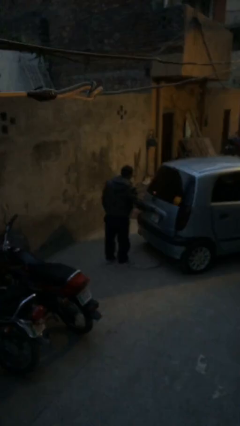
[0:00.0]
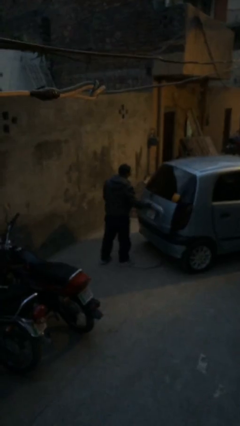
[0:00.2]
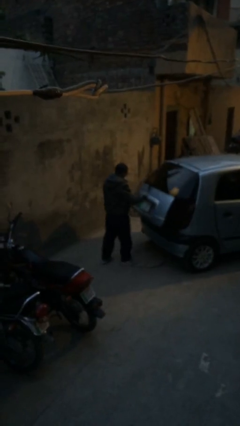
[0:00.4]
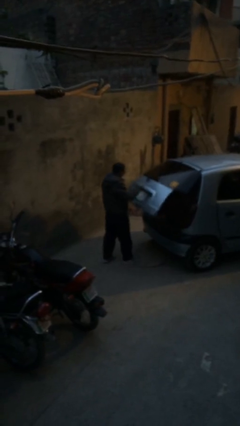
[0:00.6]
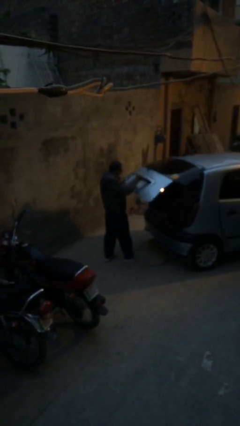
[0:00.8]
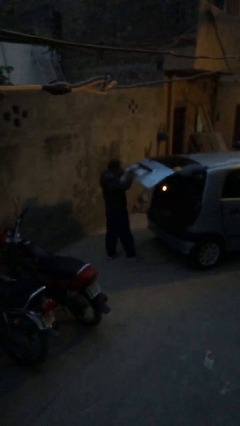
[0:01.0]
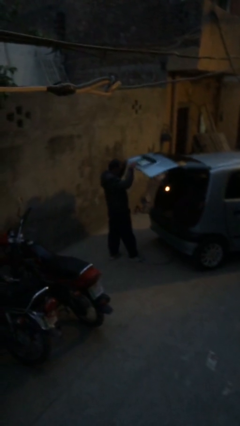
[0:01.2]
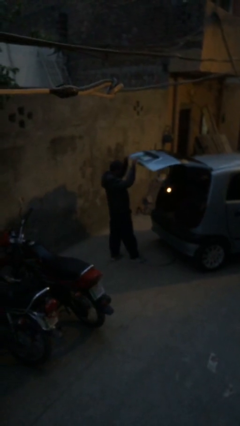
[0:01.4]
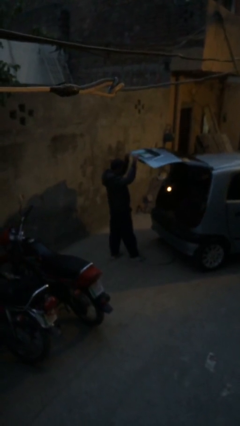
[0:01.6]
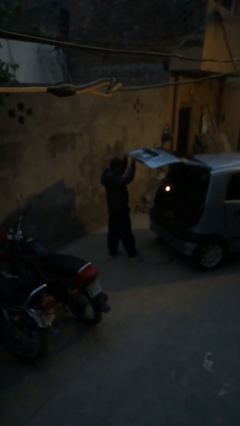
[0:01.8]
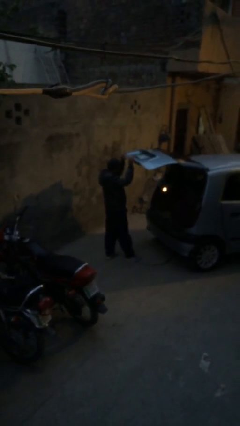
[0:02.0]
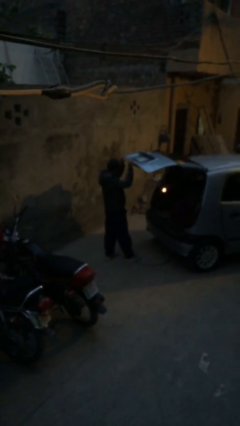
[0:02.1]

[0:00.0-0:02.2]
person opens car trunk

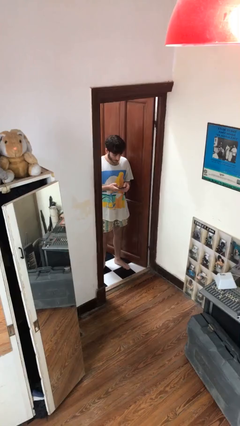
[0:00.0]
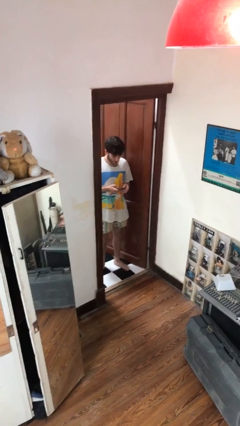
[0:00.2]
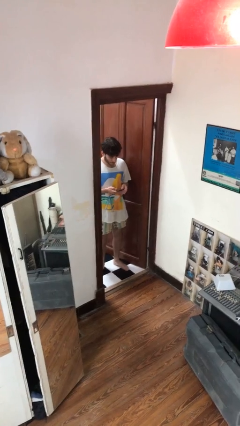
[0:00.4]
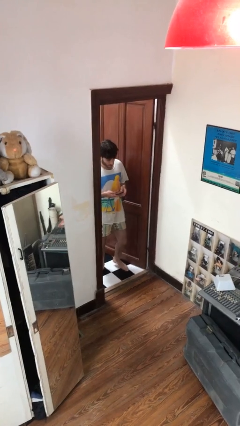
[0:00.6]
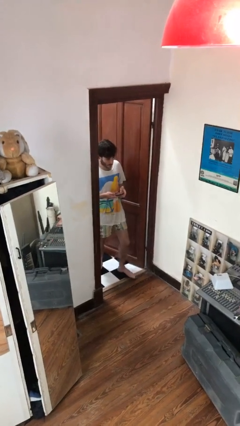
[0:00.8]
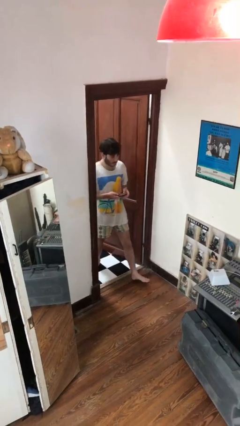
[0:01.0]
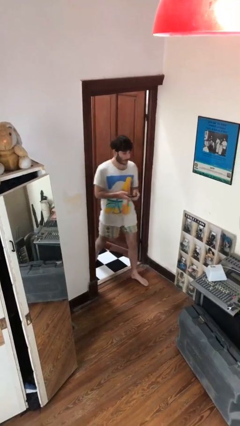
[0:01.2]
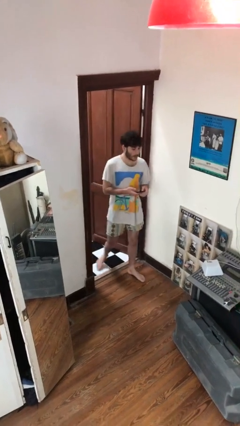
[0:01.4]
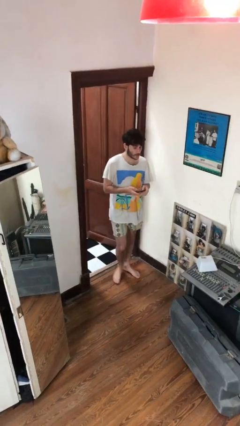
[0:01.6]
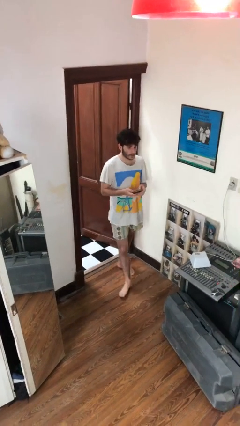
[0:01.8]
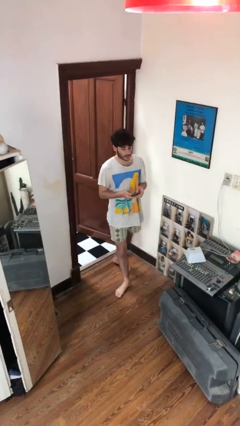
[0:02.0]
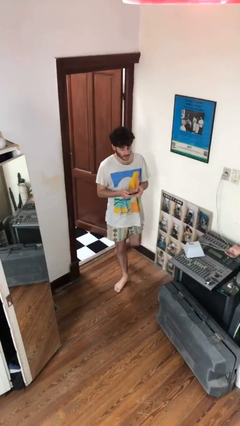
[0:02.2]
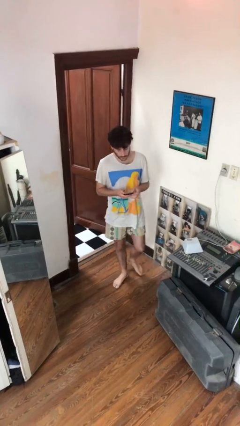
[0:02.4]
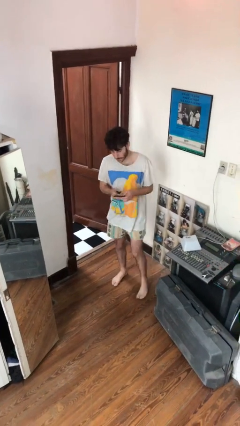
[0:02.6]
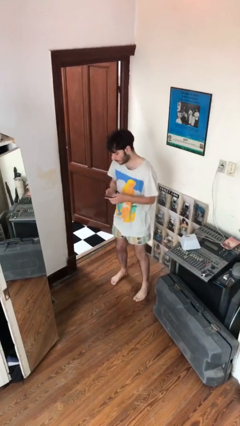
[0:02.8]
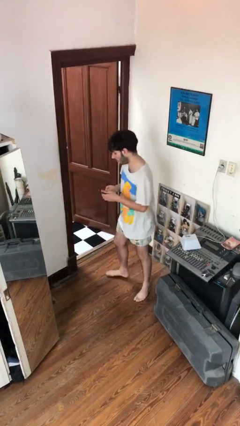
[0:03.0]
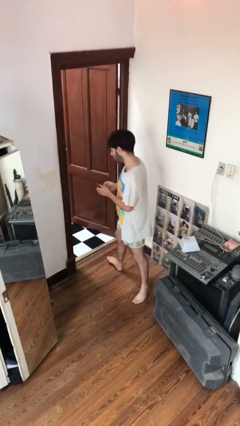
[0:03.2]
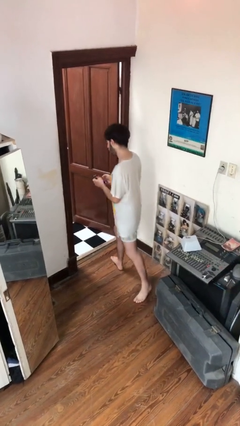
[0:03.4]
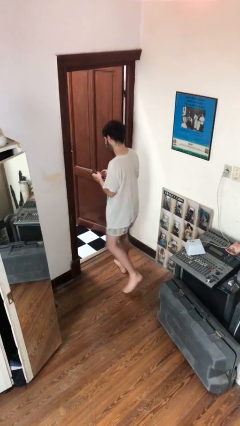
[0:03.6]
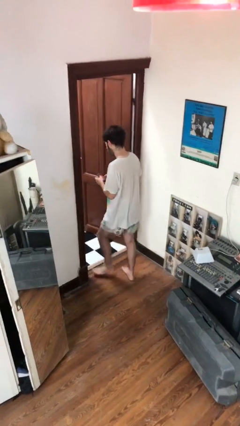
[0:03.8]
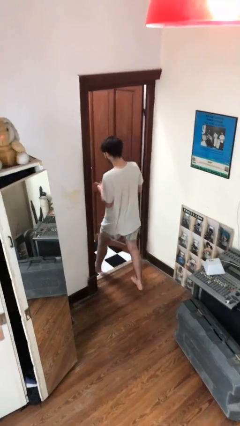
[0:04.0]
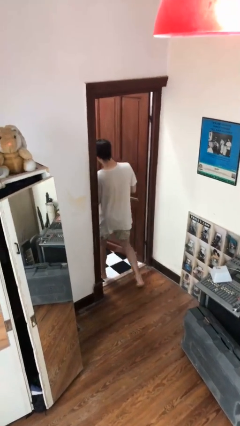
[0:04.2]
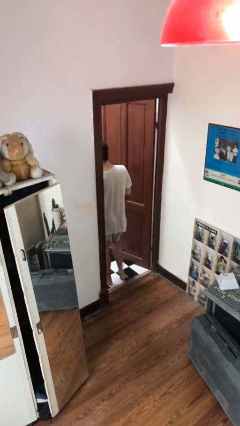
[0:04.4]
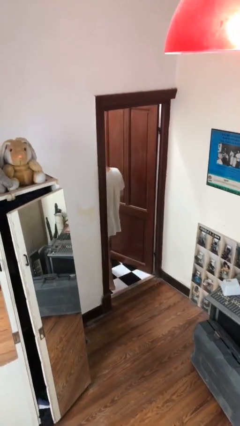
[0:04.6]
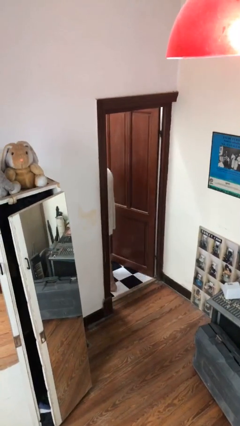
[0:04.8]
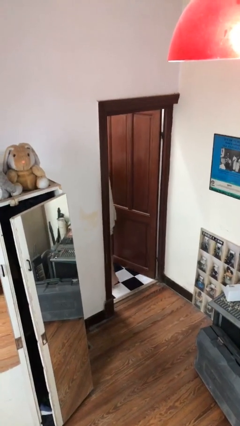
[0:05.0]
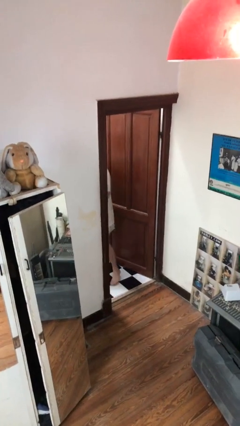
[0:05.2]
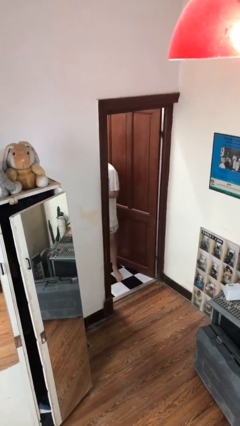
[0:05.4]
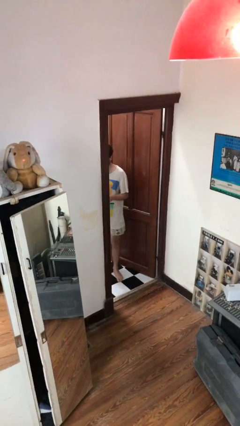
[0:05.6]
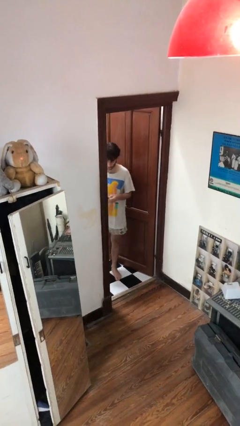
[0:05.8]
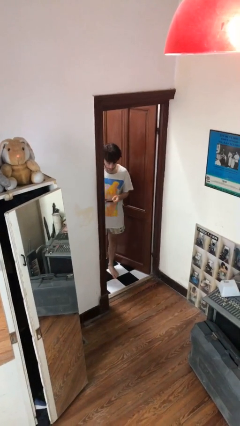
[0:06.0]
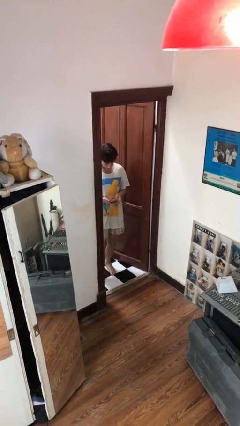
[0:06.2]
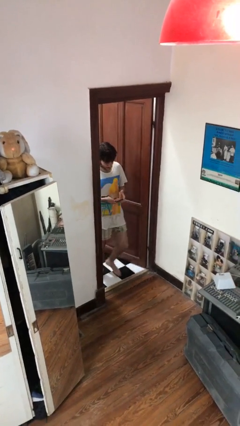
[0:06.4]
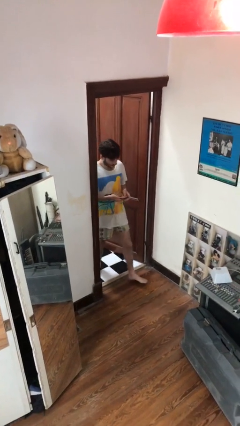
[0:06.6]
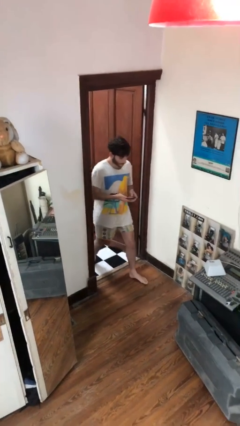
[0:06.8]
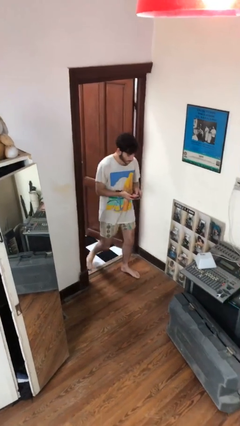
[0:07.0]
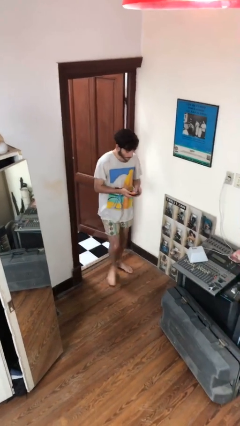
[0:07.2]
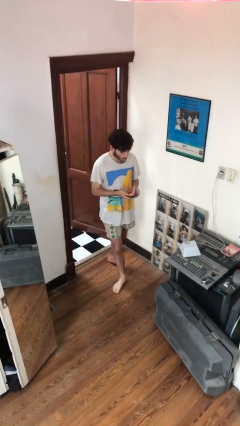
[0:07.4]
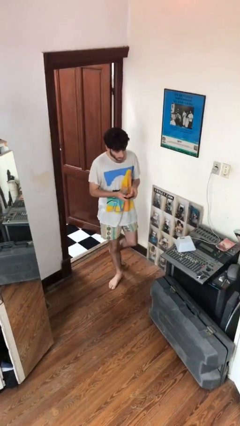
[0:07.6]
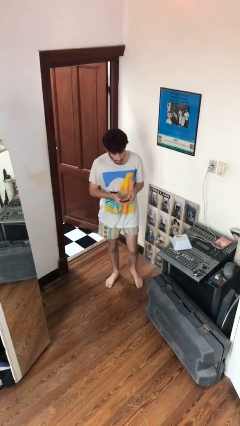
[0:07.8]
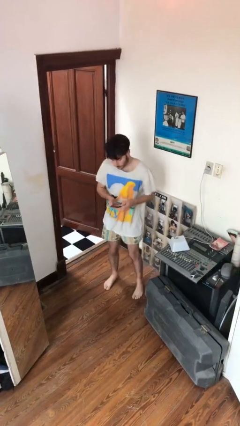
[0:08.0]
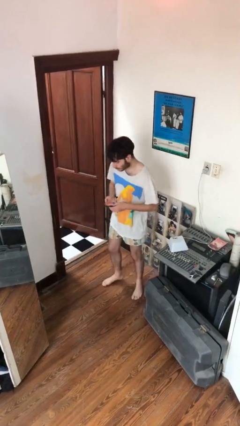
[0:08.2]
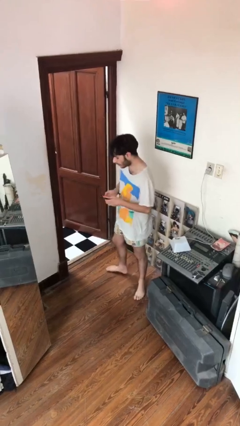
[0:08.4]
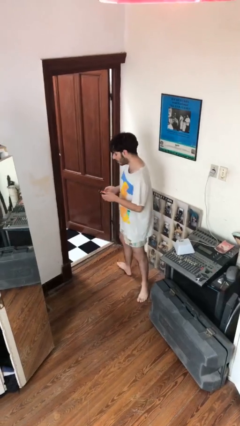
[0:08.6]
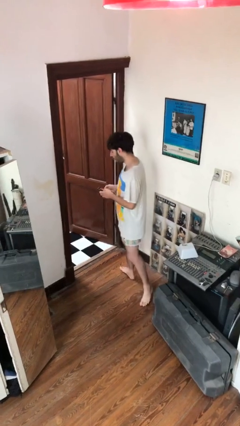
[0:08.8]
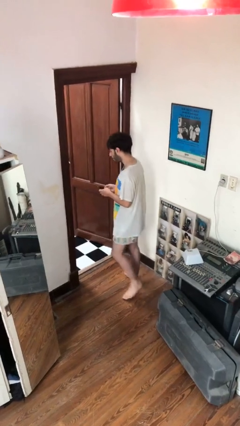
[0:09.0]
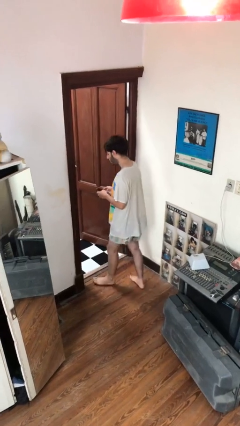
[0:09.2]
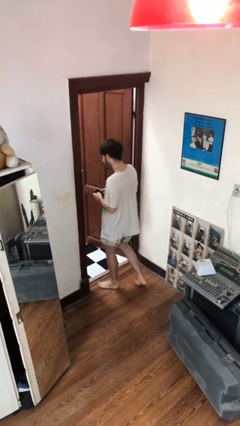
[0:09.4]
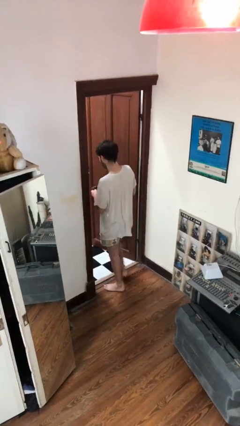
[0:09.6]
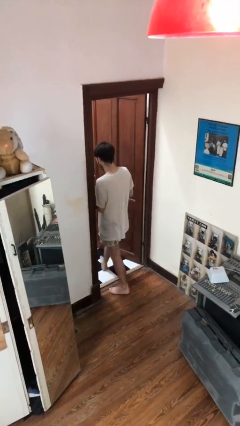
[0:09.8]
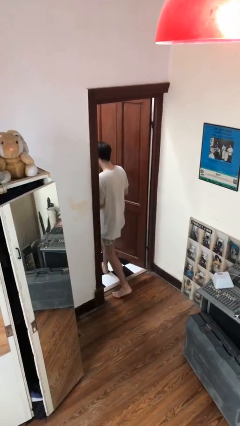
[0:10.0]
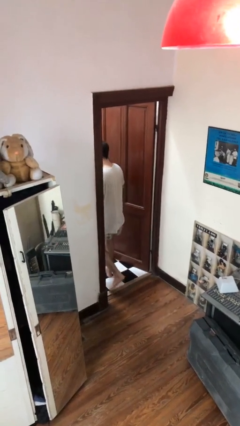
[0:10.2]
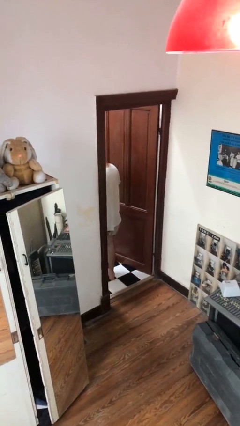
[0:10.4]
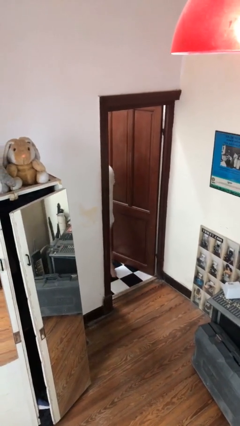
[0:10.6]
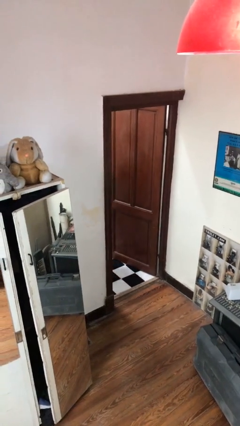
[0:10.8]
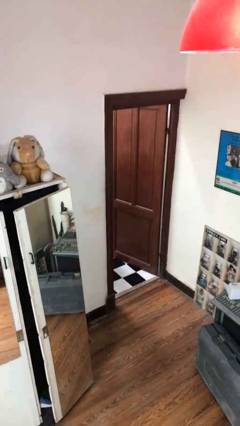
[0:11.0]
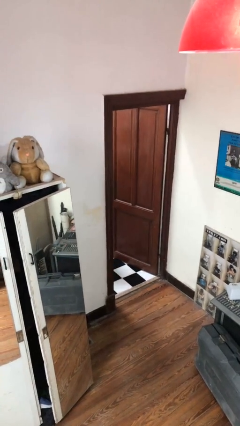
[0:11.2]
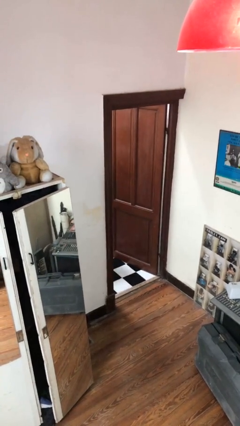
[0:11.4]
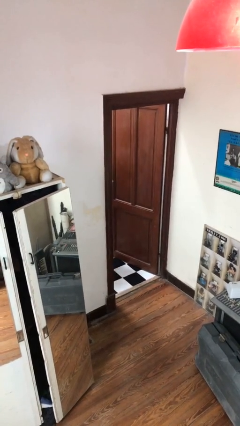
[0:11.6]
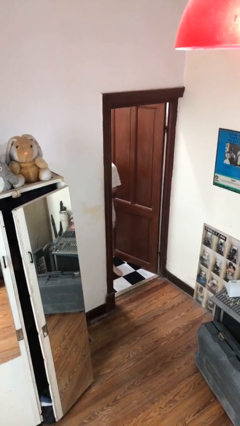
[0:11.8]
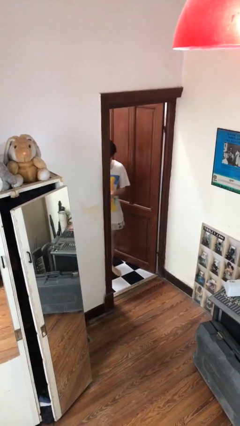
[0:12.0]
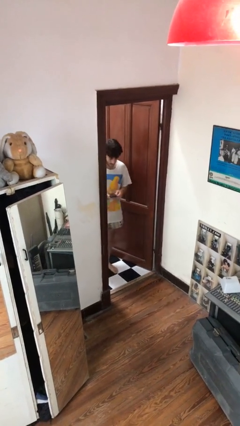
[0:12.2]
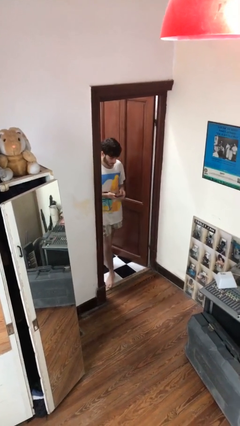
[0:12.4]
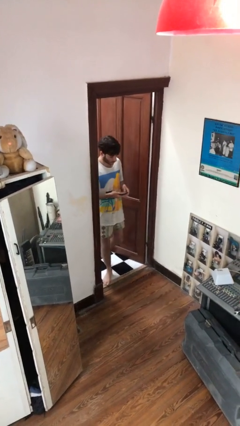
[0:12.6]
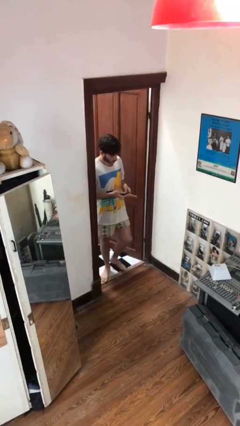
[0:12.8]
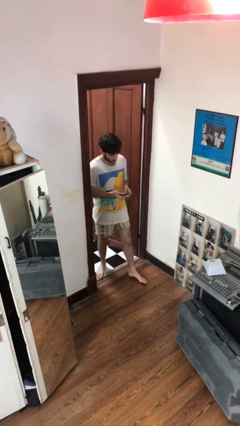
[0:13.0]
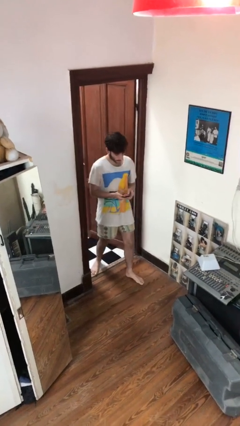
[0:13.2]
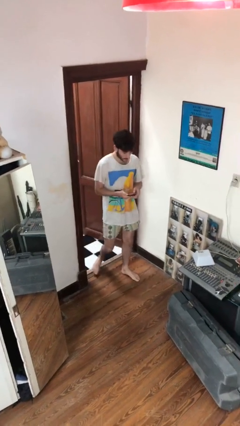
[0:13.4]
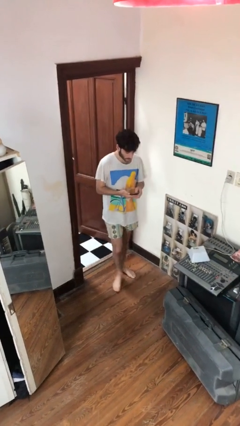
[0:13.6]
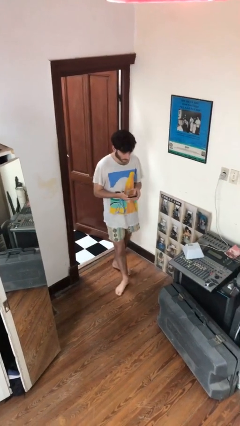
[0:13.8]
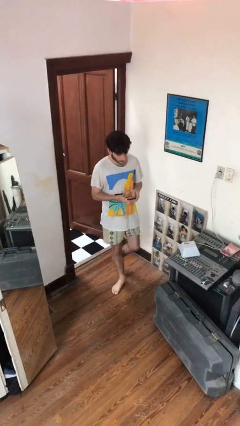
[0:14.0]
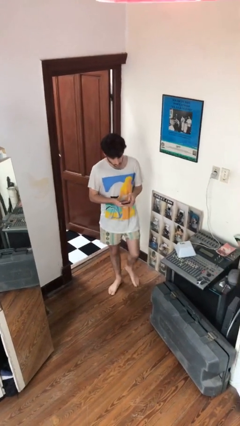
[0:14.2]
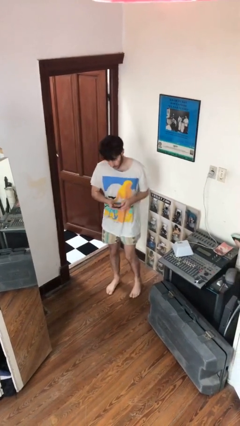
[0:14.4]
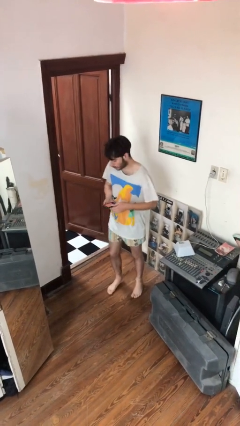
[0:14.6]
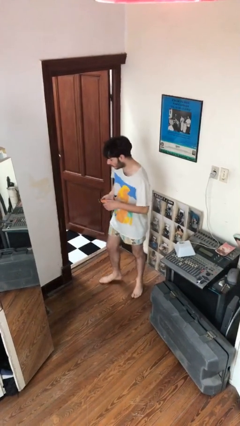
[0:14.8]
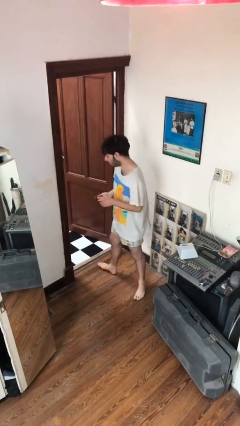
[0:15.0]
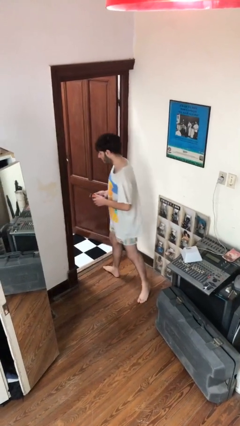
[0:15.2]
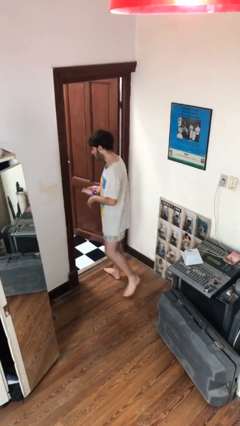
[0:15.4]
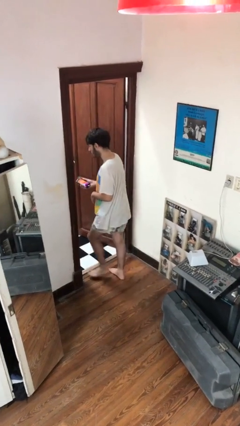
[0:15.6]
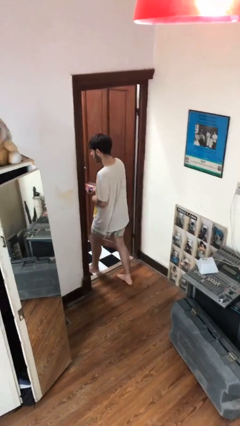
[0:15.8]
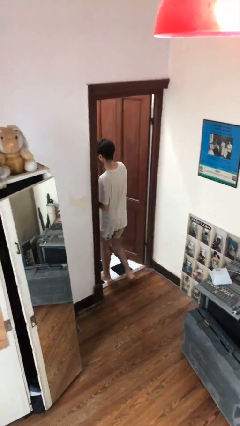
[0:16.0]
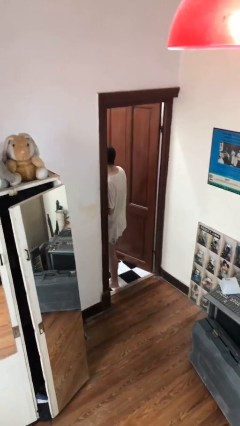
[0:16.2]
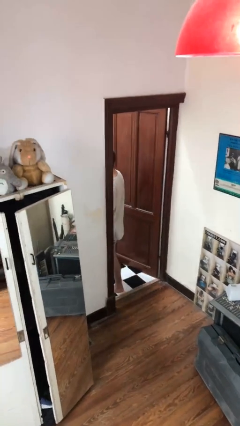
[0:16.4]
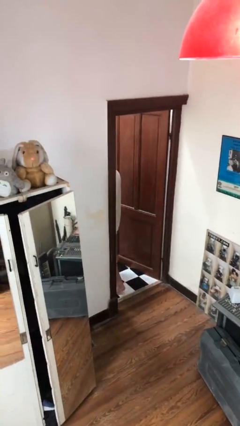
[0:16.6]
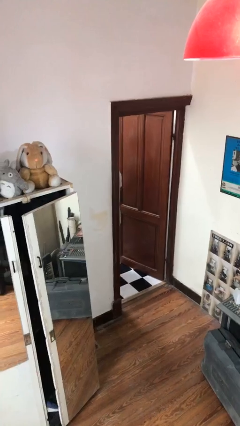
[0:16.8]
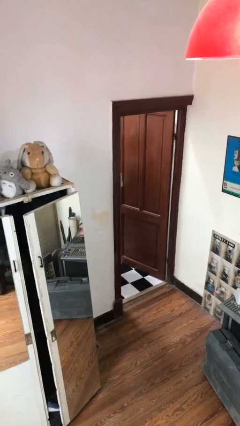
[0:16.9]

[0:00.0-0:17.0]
person texts on phone
